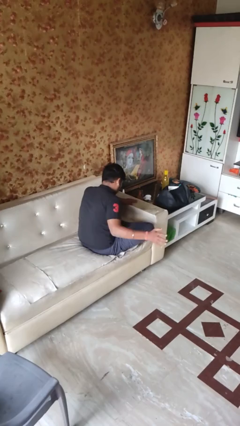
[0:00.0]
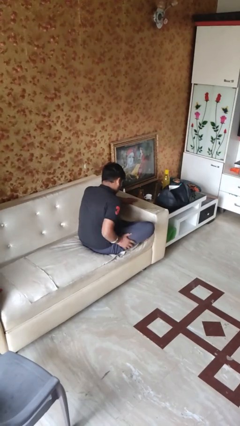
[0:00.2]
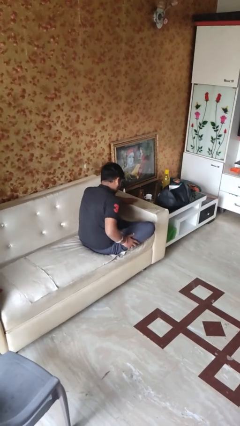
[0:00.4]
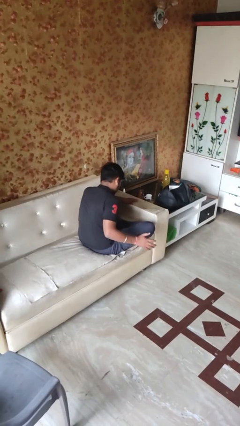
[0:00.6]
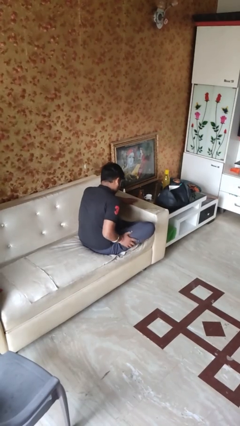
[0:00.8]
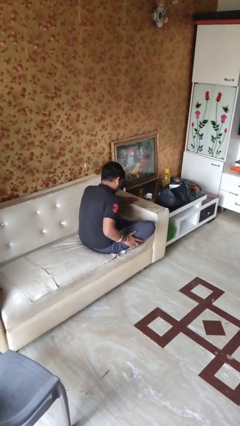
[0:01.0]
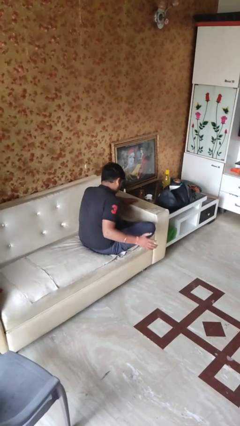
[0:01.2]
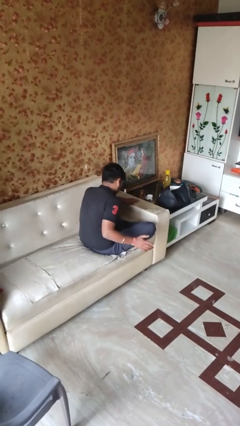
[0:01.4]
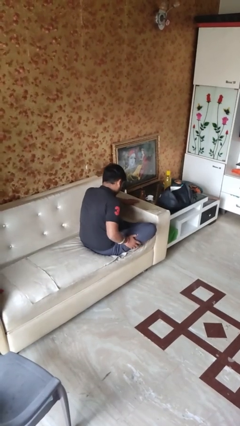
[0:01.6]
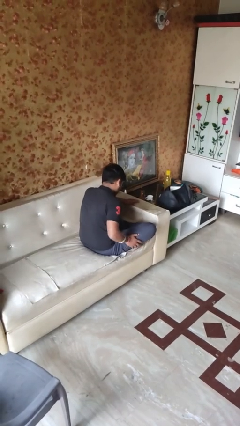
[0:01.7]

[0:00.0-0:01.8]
person slaps hands on thighs

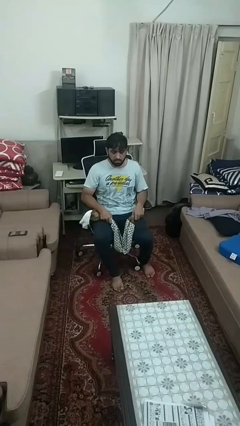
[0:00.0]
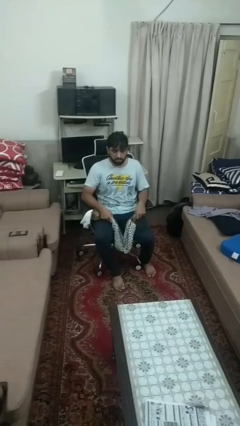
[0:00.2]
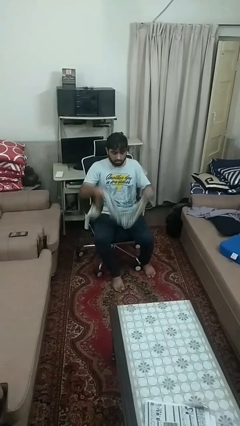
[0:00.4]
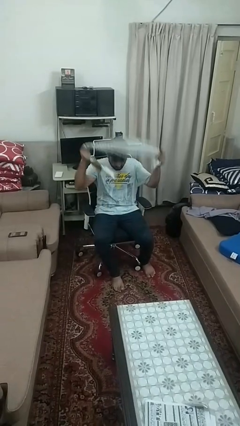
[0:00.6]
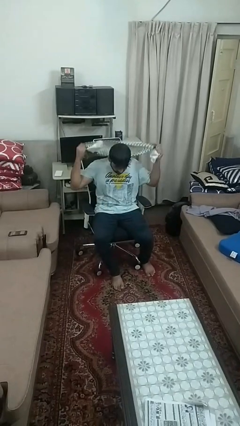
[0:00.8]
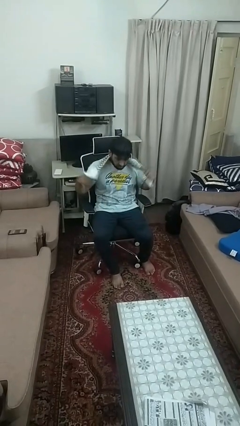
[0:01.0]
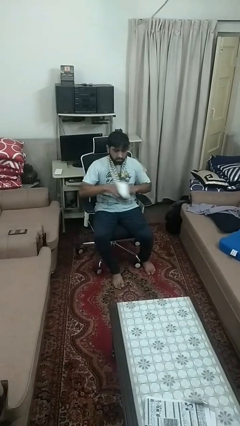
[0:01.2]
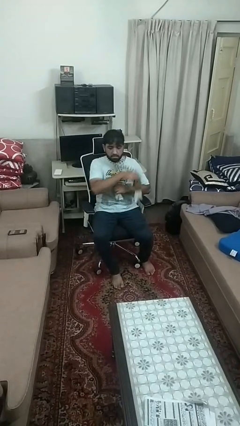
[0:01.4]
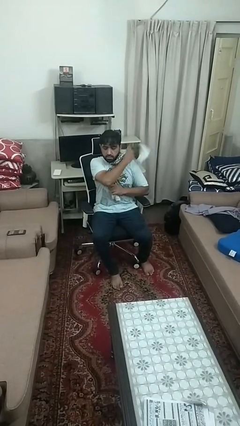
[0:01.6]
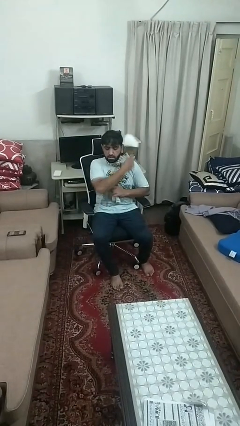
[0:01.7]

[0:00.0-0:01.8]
person puts on scarf

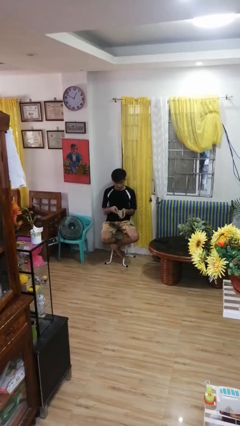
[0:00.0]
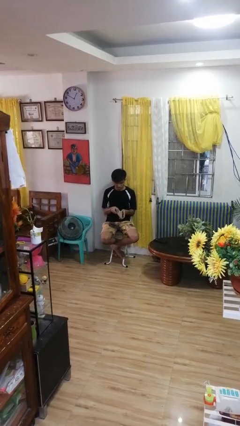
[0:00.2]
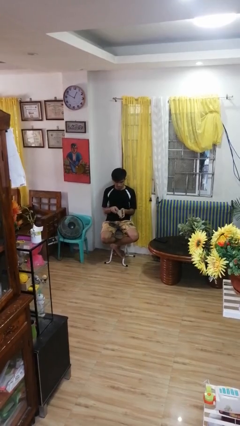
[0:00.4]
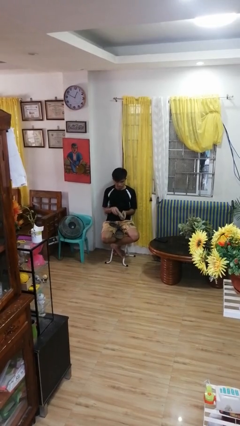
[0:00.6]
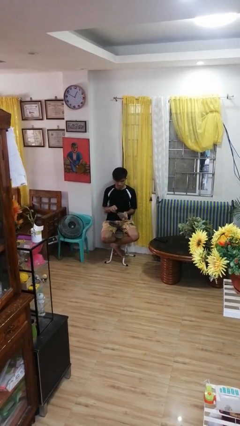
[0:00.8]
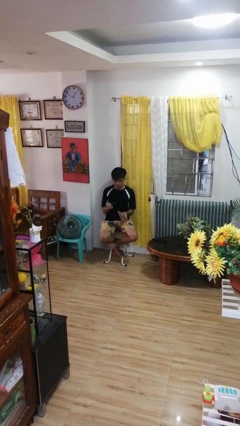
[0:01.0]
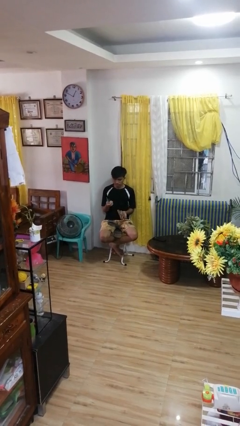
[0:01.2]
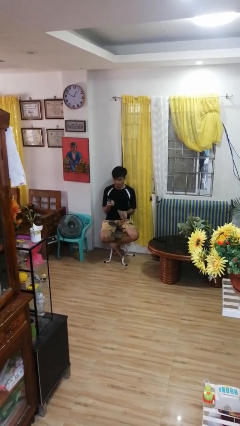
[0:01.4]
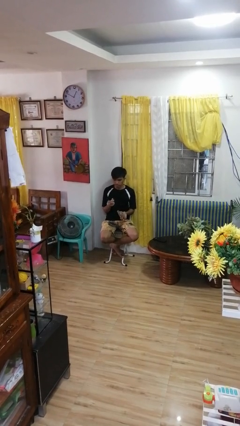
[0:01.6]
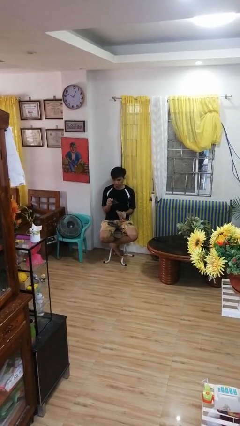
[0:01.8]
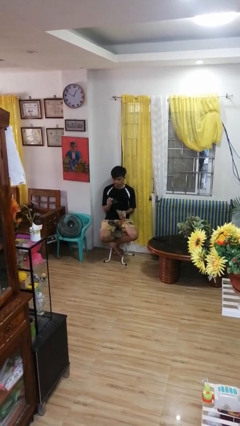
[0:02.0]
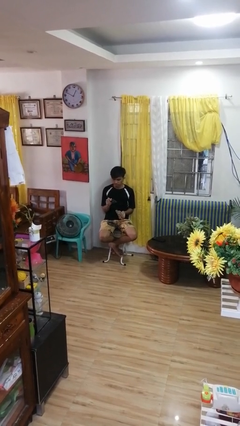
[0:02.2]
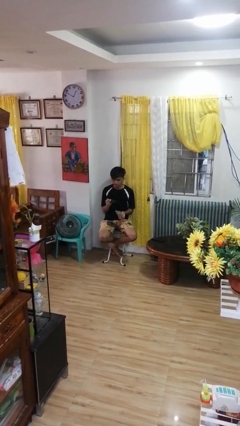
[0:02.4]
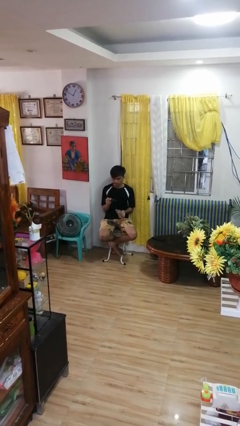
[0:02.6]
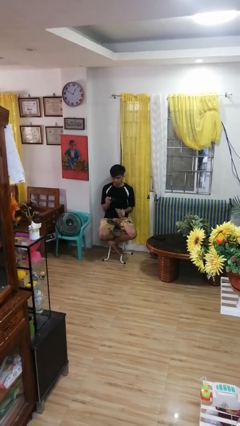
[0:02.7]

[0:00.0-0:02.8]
person takes object from purse

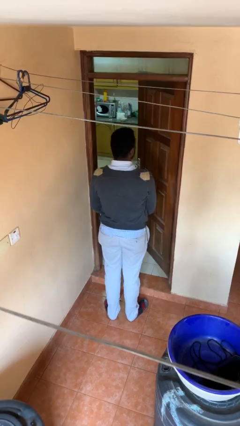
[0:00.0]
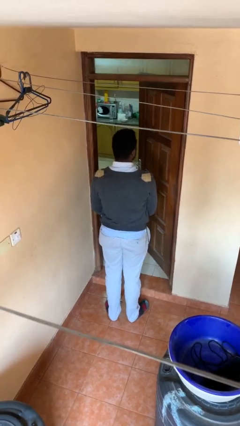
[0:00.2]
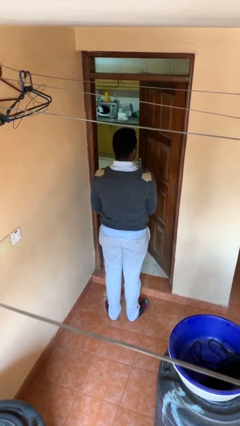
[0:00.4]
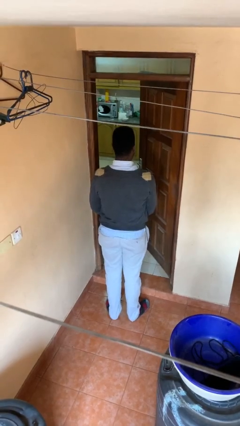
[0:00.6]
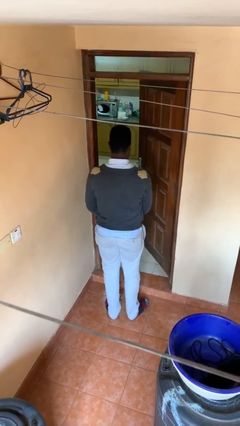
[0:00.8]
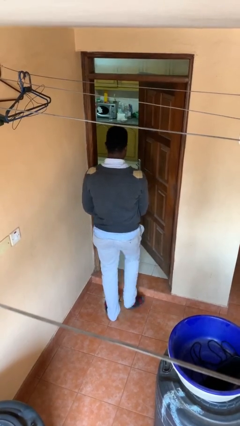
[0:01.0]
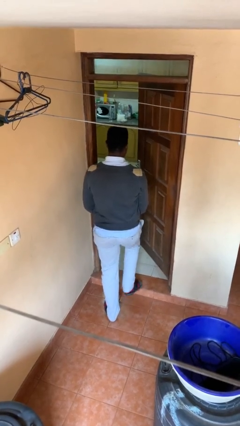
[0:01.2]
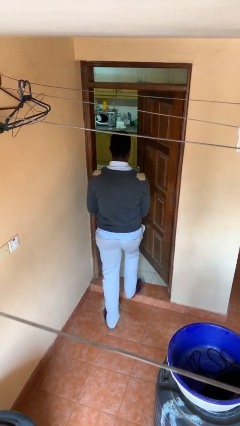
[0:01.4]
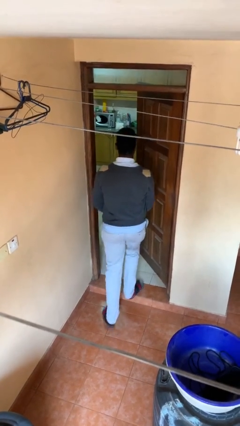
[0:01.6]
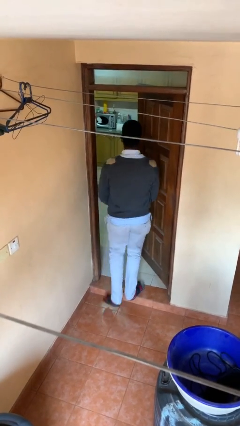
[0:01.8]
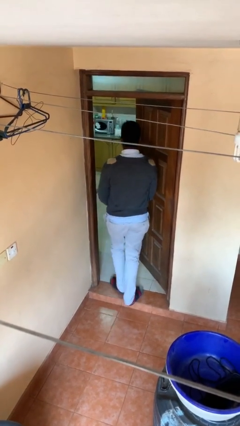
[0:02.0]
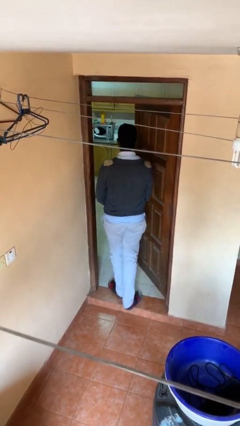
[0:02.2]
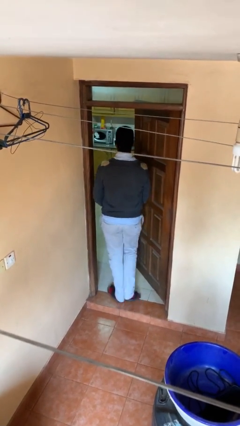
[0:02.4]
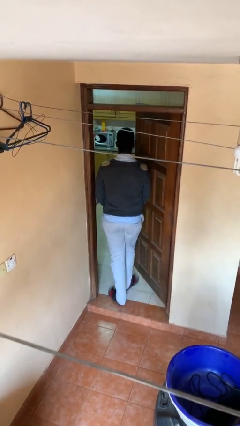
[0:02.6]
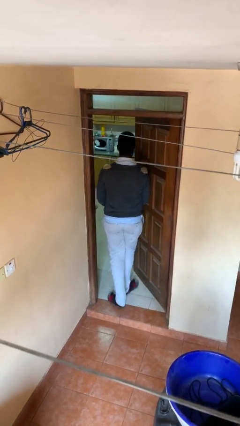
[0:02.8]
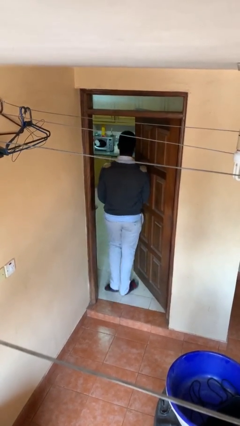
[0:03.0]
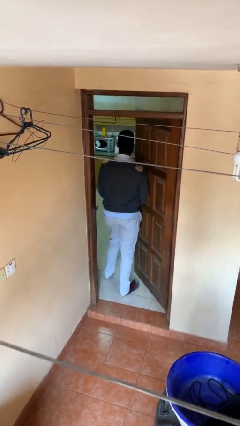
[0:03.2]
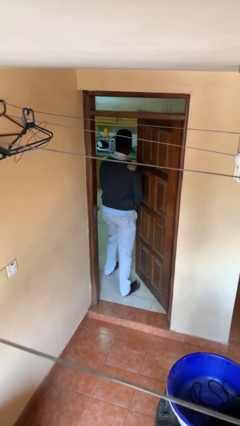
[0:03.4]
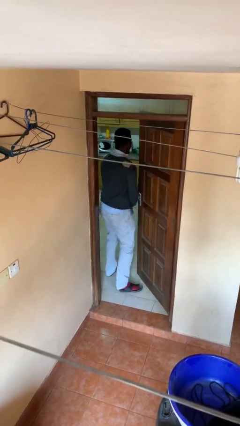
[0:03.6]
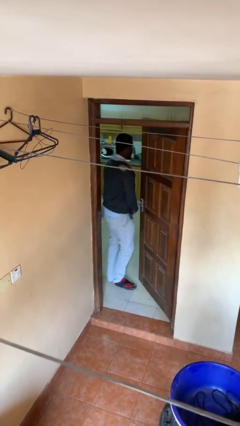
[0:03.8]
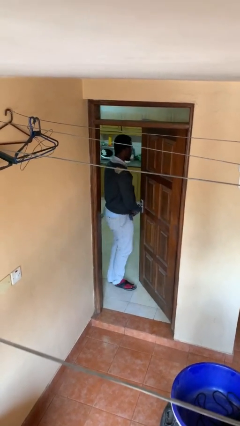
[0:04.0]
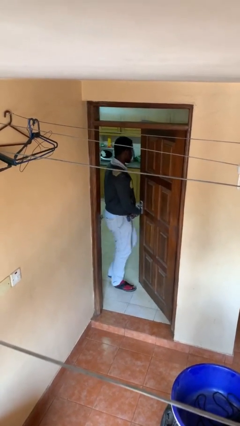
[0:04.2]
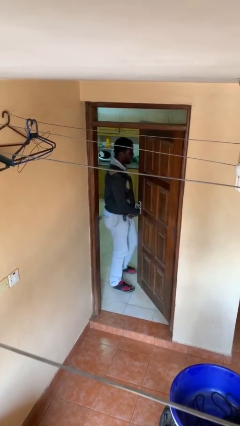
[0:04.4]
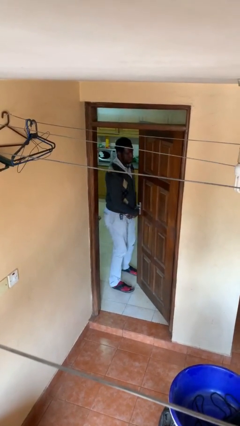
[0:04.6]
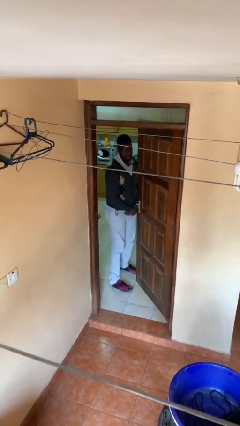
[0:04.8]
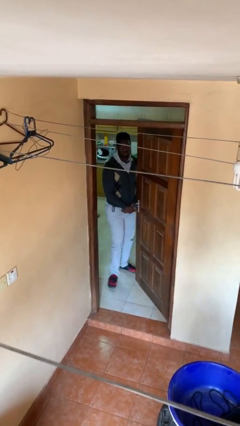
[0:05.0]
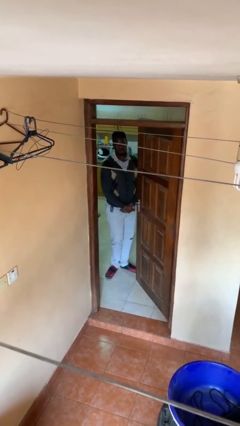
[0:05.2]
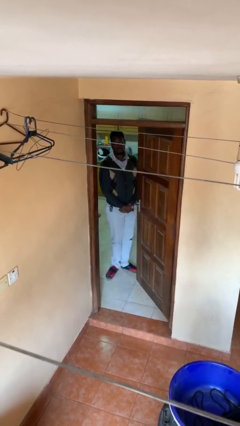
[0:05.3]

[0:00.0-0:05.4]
person exits scene through structure

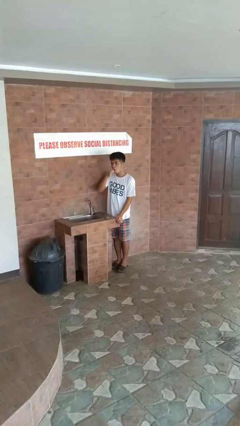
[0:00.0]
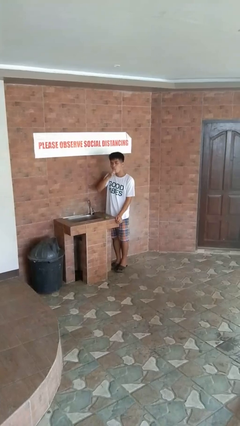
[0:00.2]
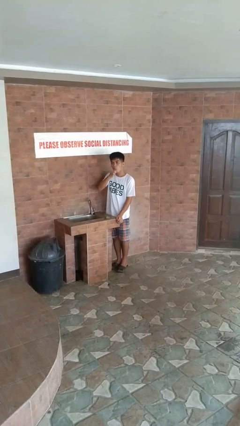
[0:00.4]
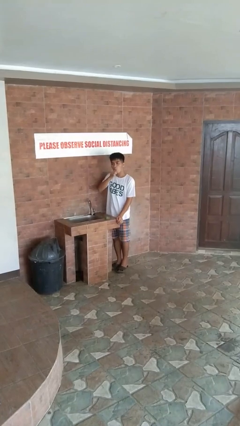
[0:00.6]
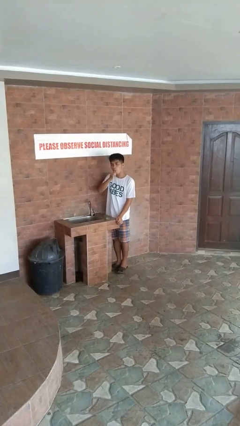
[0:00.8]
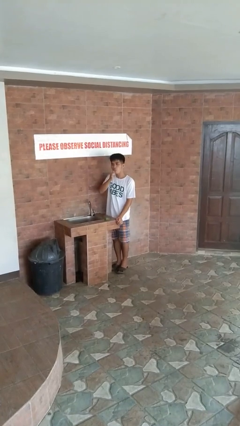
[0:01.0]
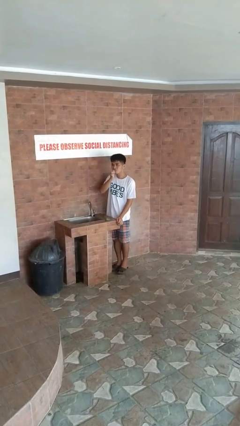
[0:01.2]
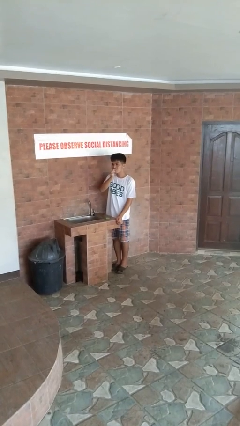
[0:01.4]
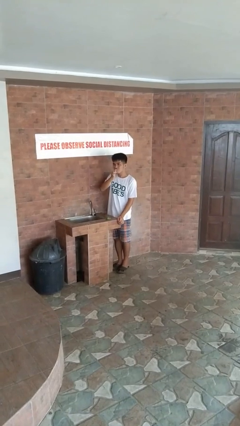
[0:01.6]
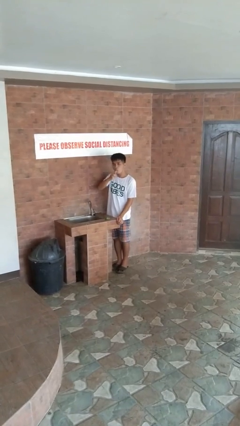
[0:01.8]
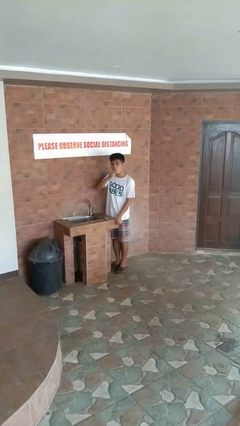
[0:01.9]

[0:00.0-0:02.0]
person brushes teeth

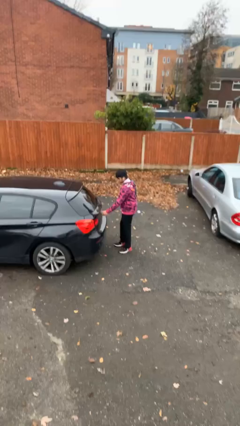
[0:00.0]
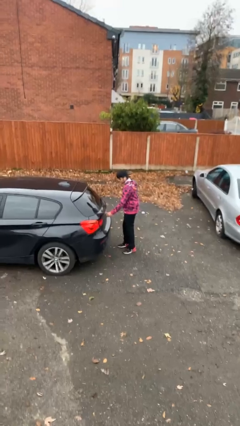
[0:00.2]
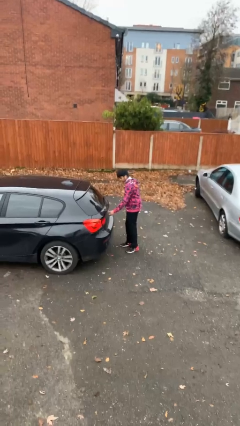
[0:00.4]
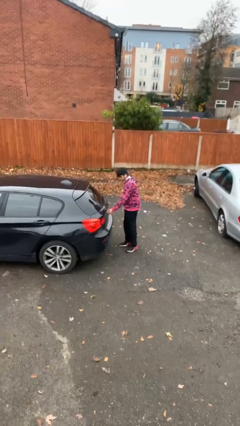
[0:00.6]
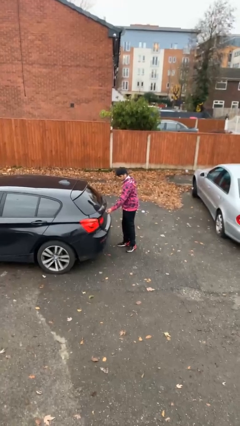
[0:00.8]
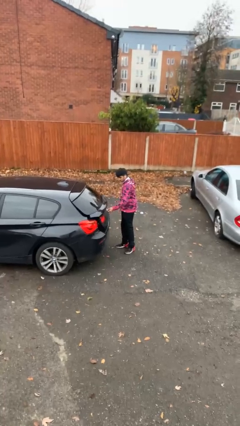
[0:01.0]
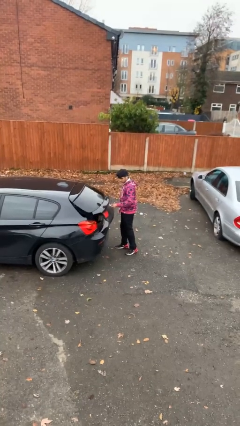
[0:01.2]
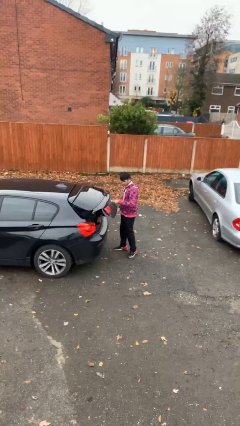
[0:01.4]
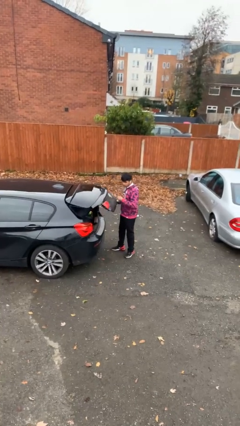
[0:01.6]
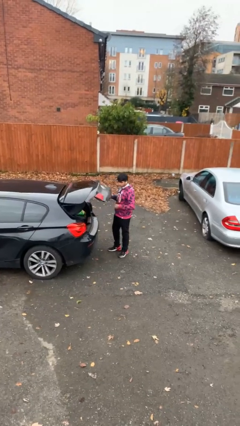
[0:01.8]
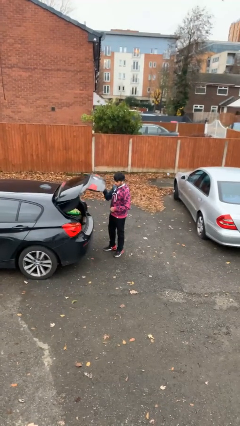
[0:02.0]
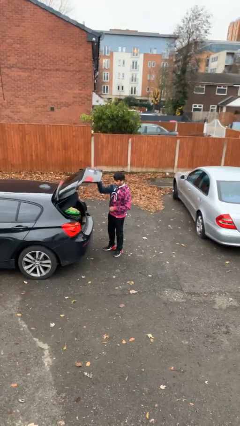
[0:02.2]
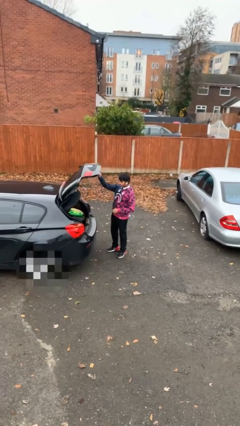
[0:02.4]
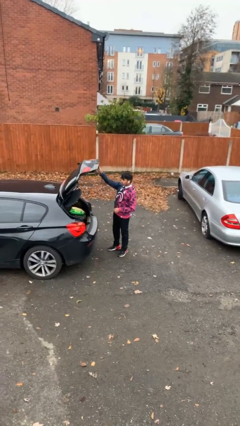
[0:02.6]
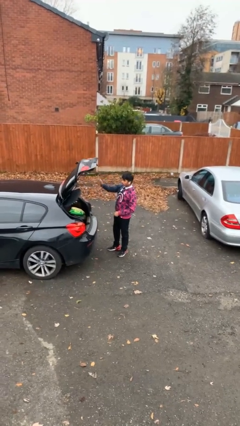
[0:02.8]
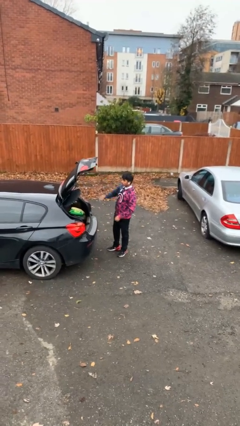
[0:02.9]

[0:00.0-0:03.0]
person opens car trunk

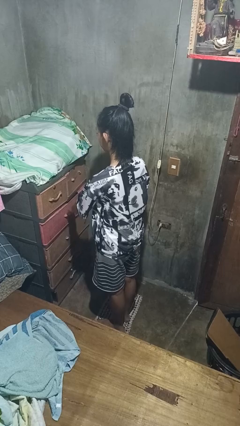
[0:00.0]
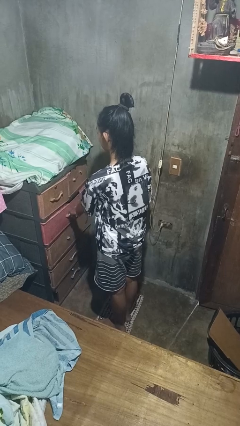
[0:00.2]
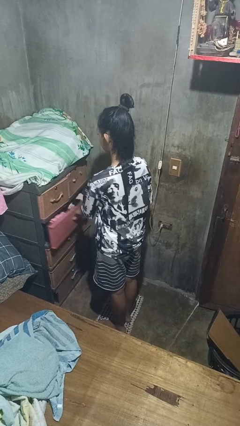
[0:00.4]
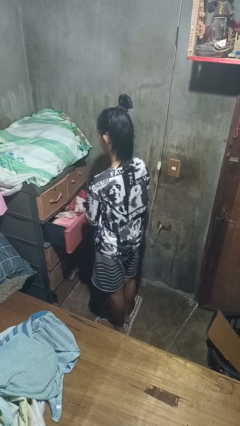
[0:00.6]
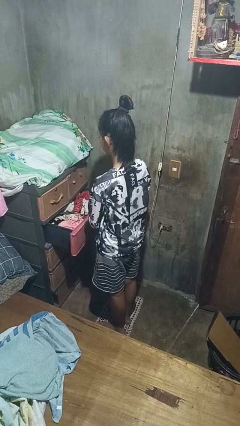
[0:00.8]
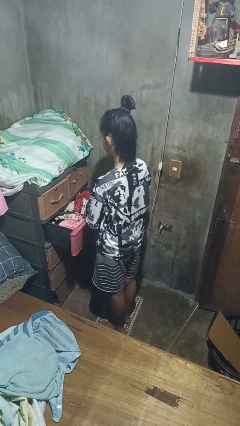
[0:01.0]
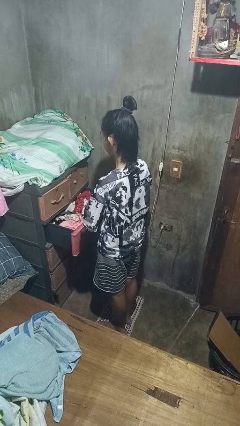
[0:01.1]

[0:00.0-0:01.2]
person opens dresser drawer
